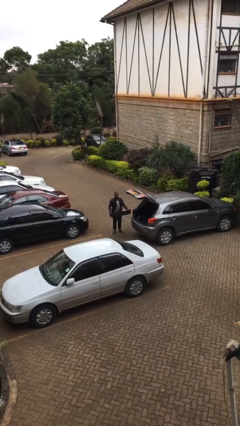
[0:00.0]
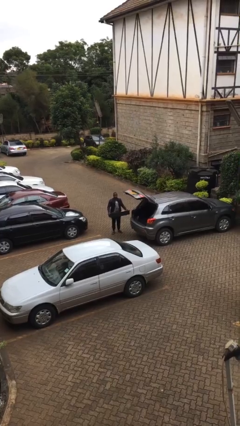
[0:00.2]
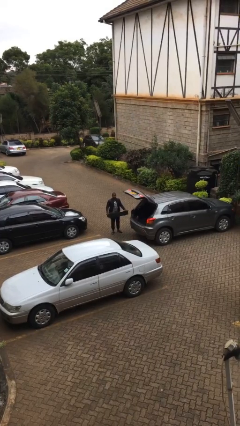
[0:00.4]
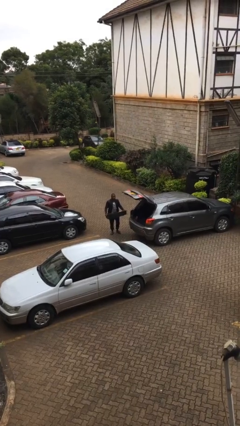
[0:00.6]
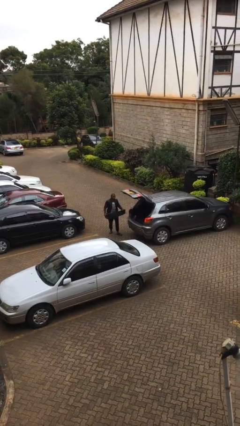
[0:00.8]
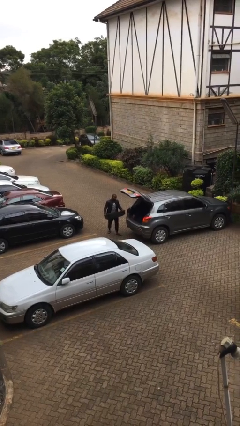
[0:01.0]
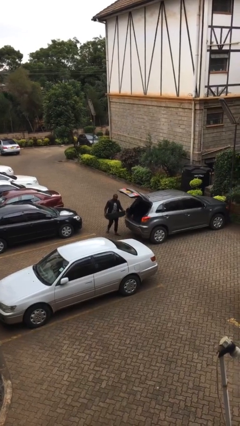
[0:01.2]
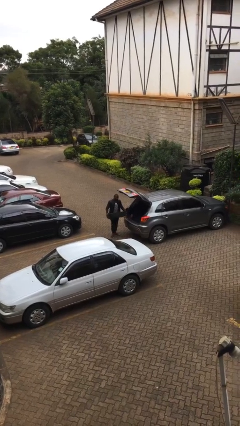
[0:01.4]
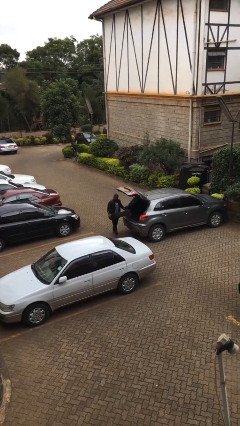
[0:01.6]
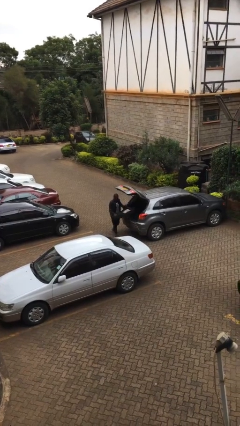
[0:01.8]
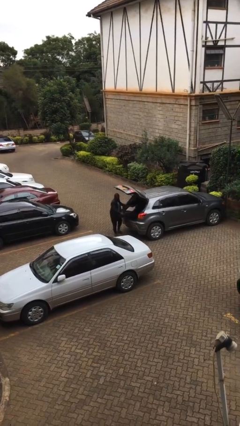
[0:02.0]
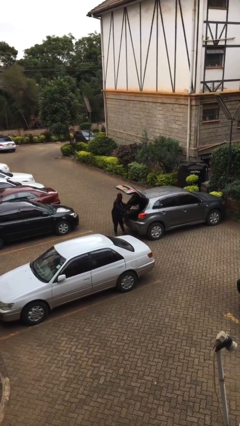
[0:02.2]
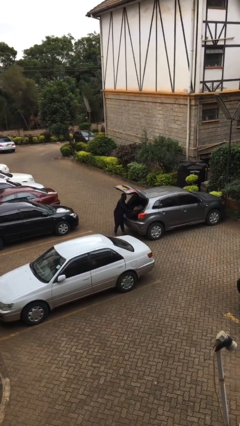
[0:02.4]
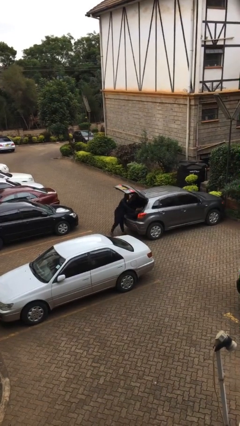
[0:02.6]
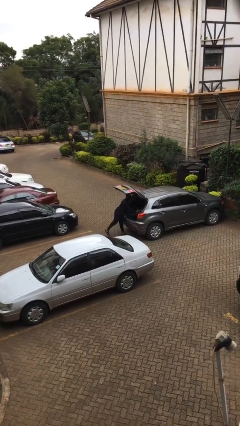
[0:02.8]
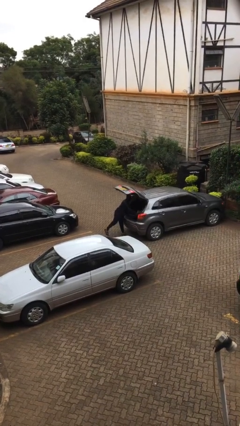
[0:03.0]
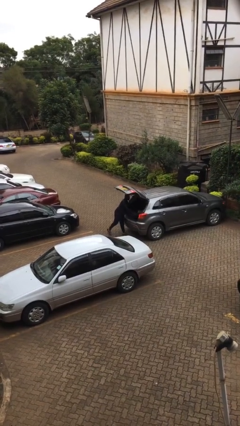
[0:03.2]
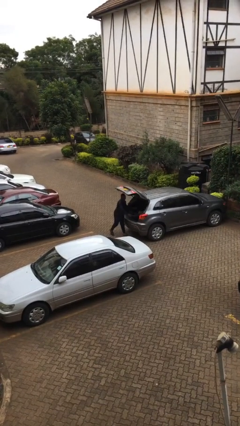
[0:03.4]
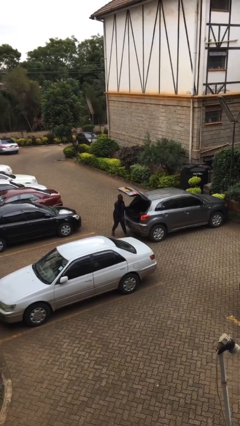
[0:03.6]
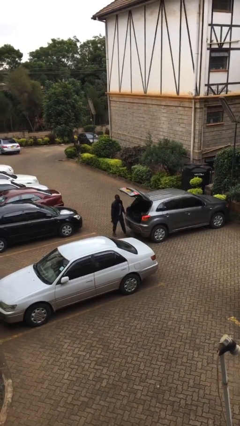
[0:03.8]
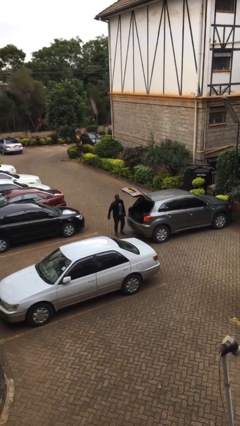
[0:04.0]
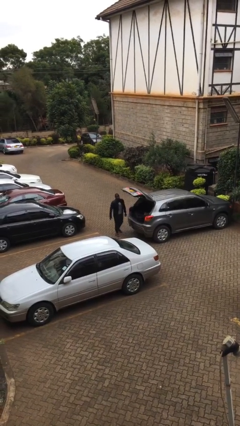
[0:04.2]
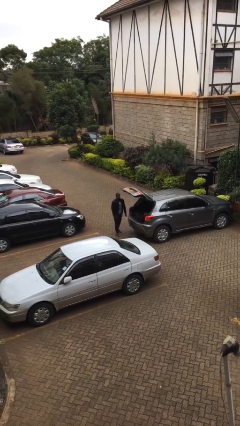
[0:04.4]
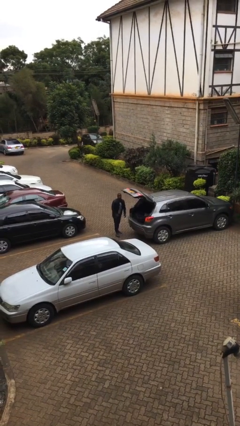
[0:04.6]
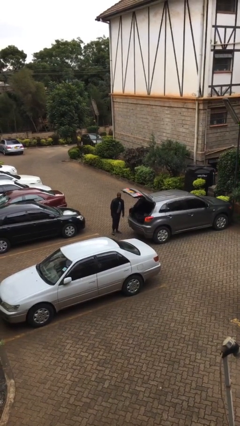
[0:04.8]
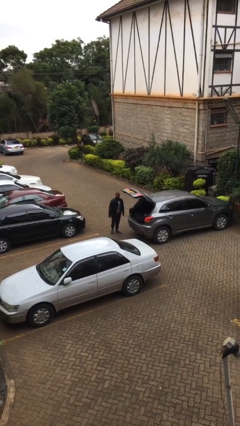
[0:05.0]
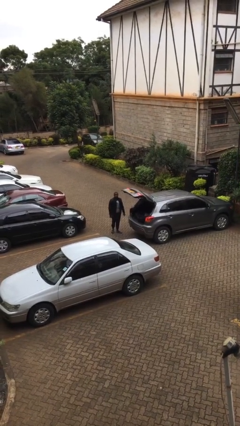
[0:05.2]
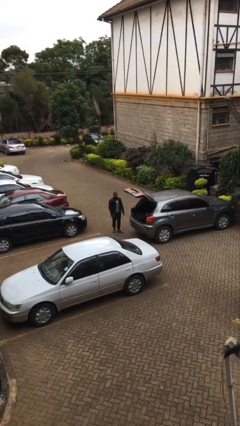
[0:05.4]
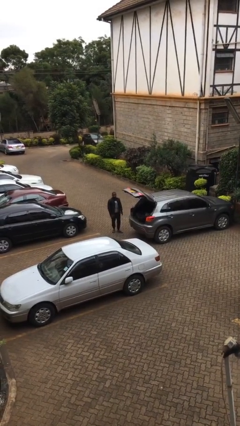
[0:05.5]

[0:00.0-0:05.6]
person loads car

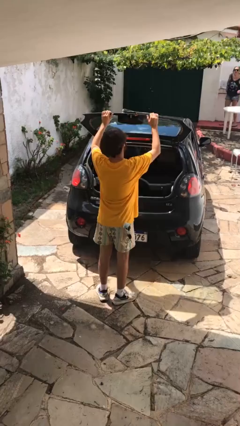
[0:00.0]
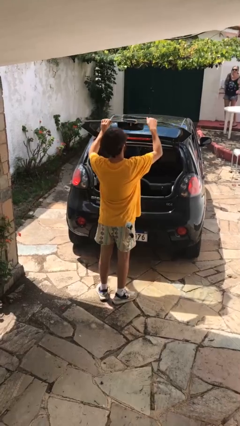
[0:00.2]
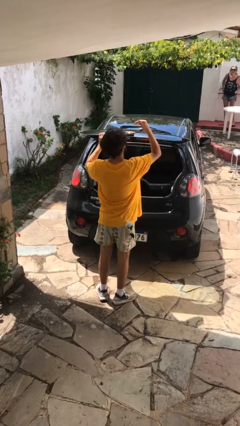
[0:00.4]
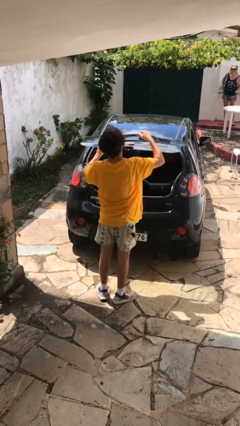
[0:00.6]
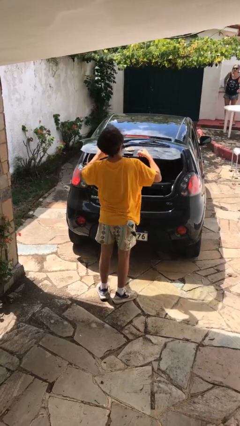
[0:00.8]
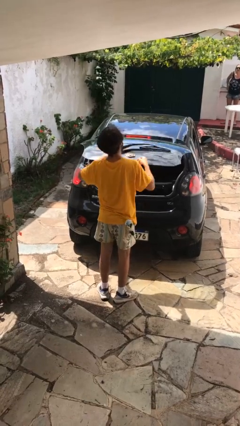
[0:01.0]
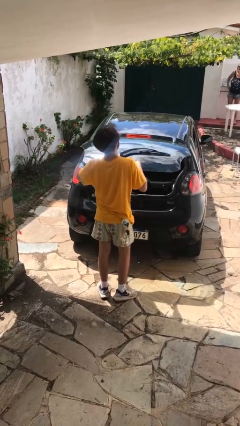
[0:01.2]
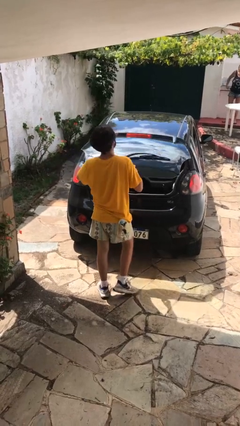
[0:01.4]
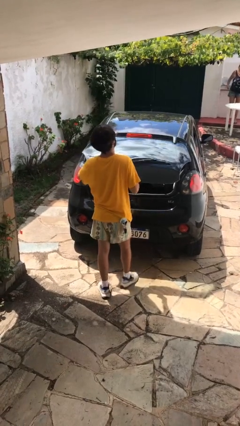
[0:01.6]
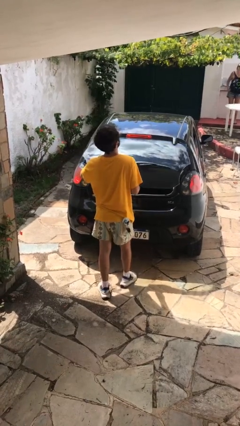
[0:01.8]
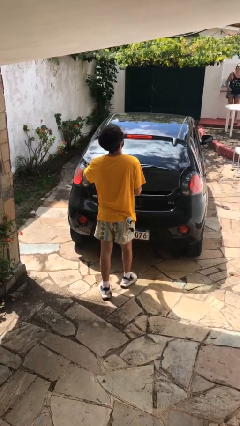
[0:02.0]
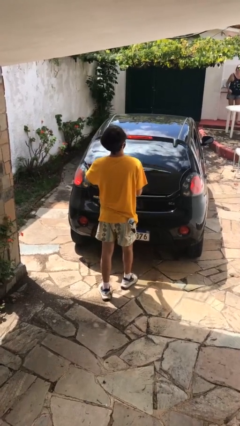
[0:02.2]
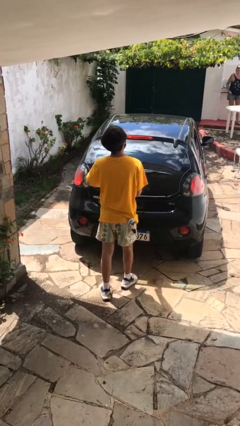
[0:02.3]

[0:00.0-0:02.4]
person closes car trunk

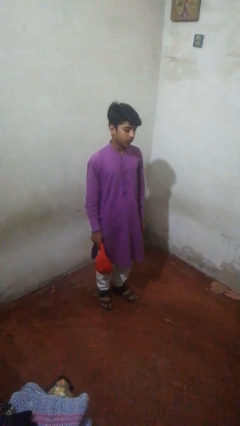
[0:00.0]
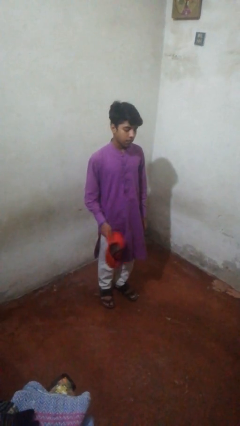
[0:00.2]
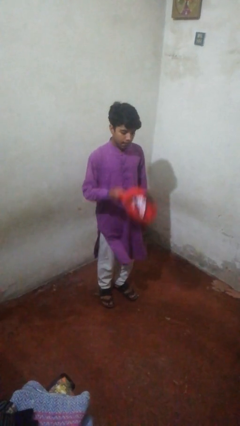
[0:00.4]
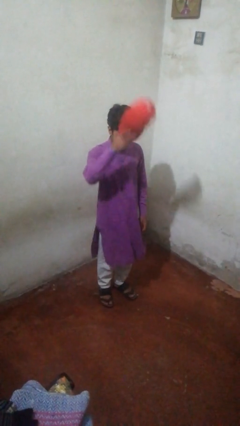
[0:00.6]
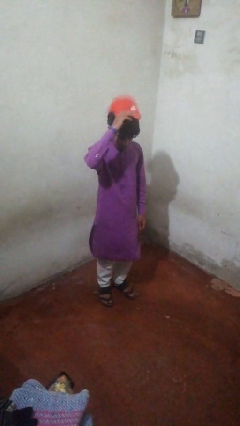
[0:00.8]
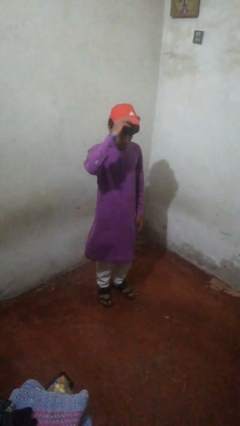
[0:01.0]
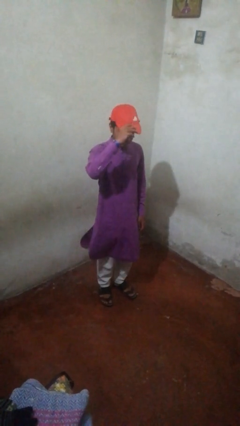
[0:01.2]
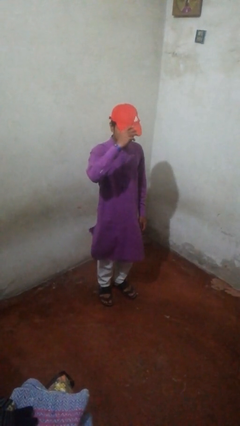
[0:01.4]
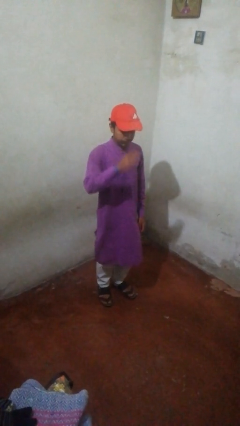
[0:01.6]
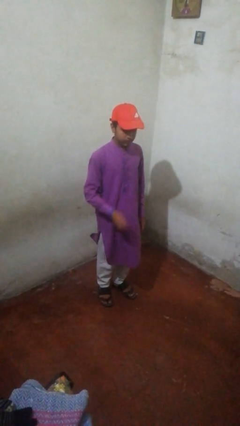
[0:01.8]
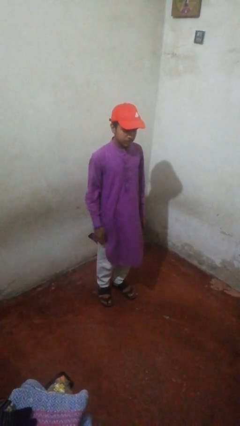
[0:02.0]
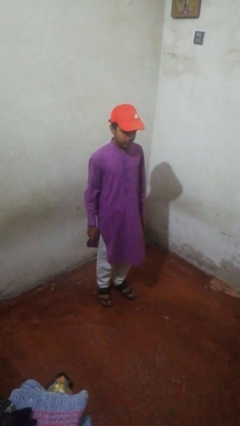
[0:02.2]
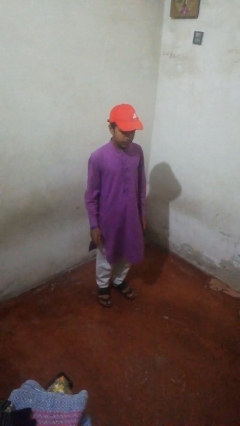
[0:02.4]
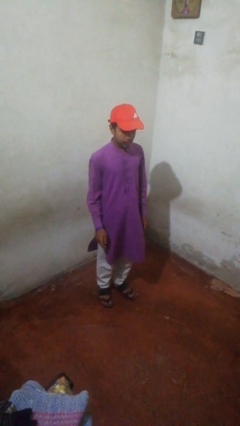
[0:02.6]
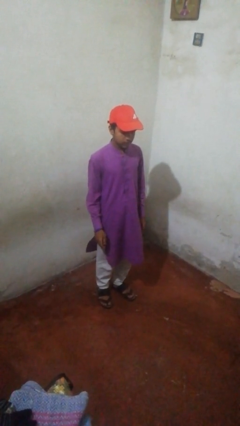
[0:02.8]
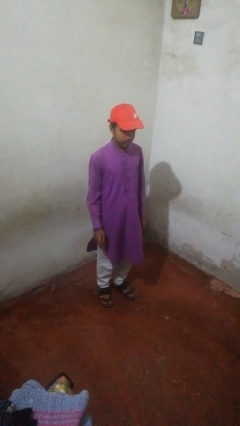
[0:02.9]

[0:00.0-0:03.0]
person opens sliding door

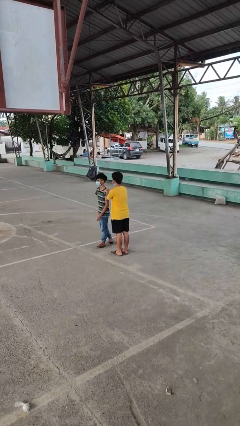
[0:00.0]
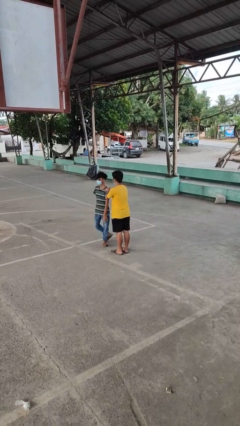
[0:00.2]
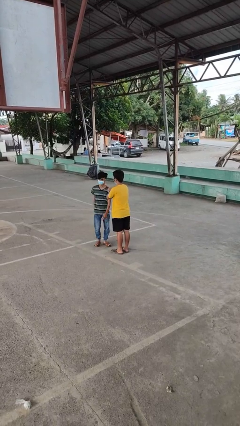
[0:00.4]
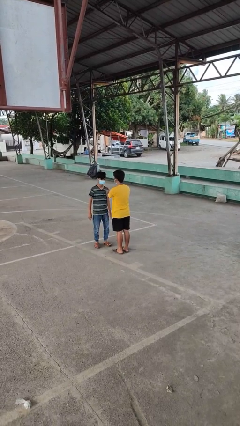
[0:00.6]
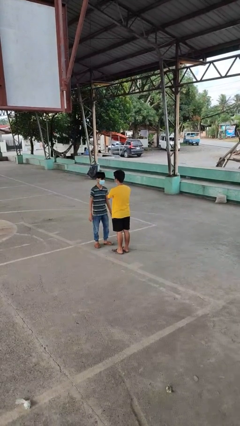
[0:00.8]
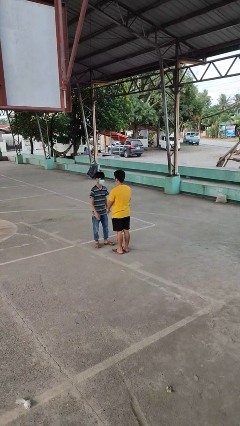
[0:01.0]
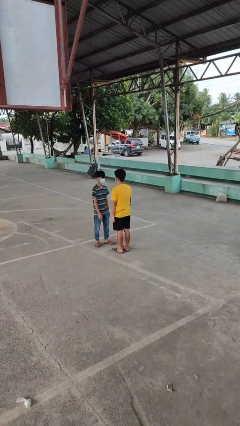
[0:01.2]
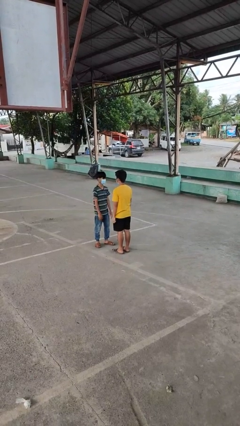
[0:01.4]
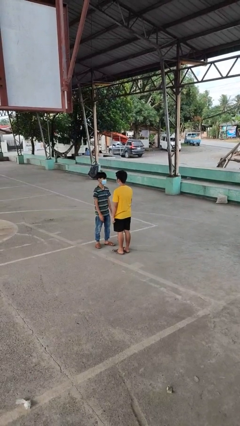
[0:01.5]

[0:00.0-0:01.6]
person spins person around
